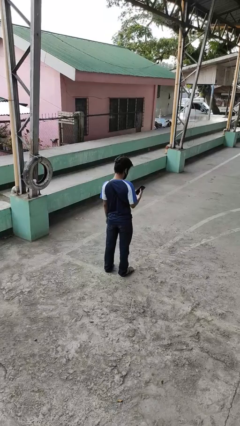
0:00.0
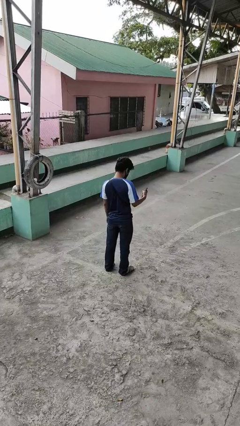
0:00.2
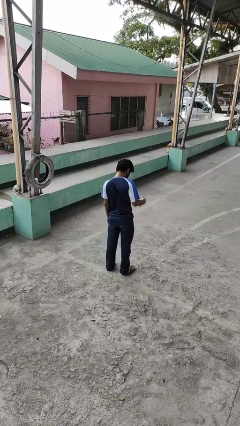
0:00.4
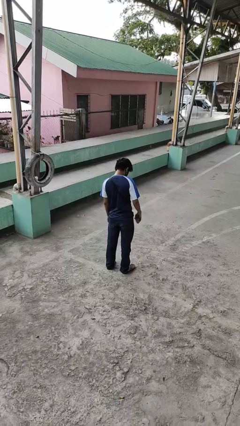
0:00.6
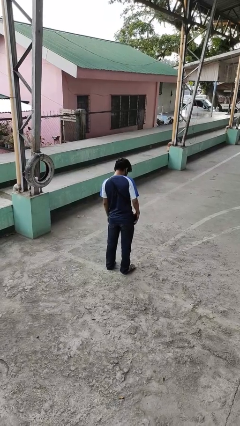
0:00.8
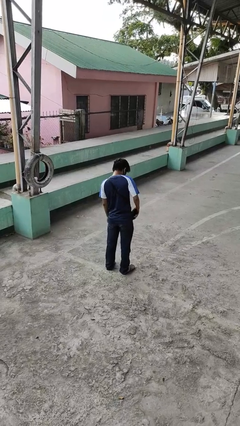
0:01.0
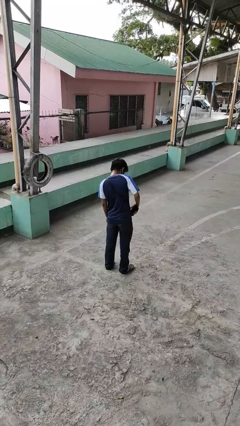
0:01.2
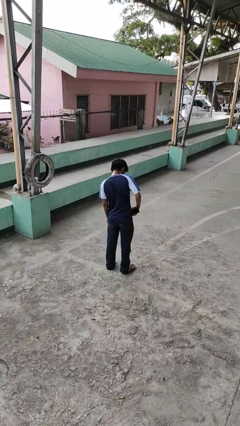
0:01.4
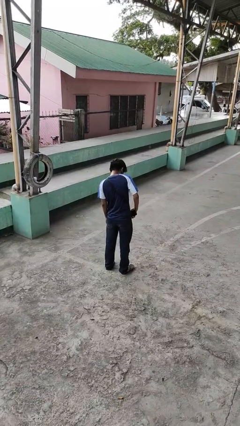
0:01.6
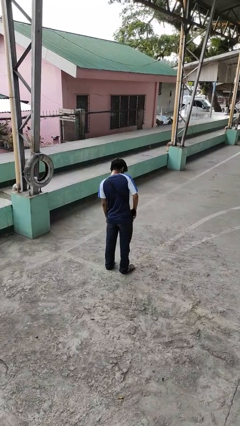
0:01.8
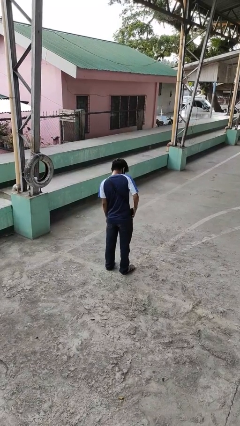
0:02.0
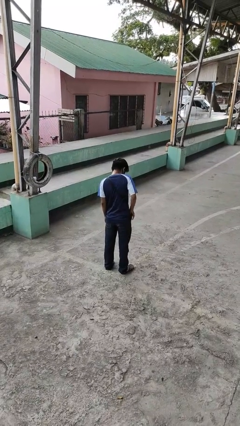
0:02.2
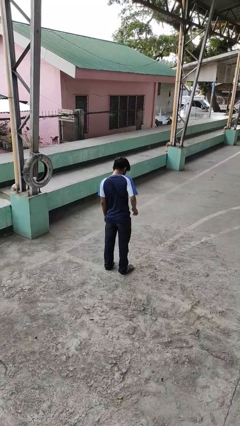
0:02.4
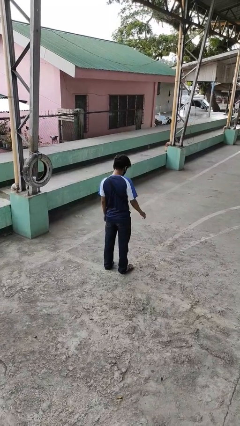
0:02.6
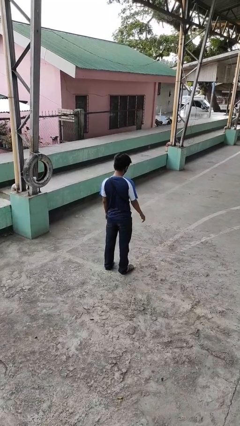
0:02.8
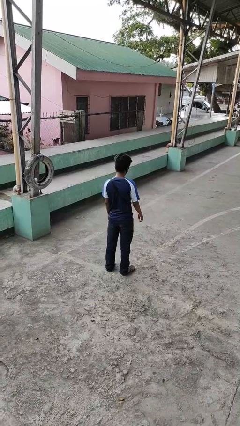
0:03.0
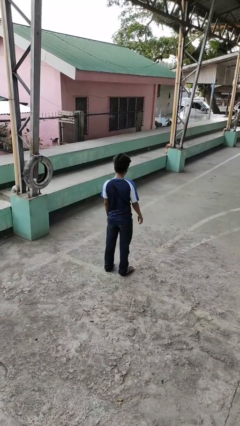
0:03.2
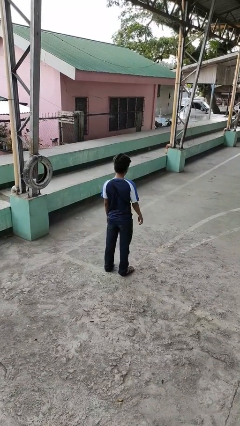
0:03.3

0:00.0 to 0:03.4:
person puts phone into pocket

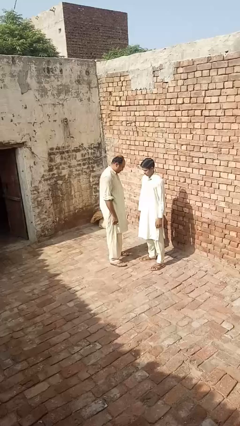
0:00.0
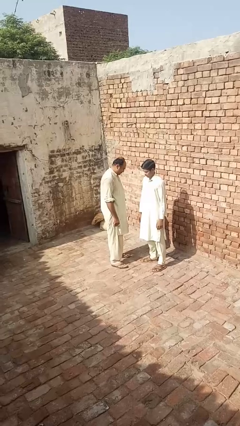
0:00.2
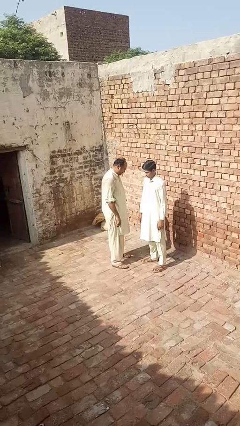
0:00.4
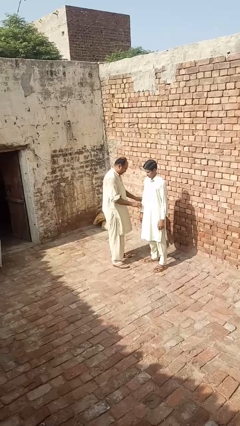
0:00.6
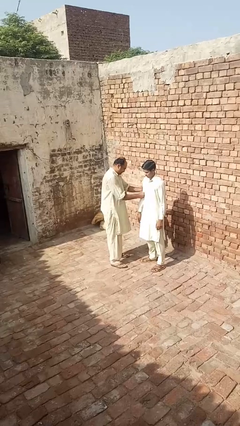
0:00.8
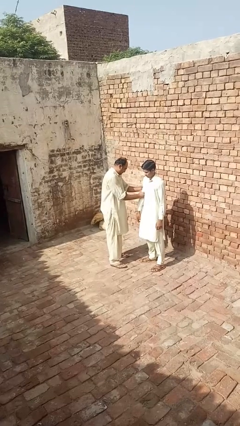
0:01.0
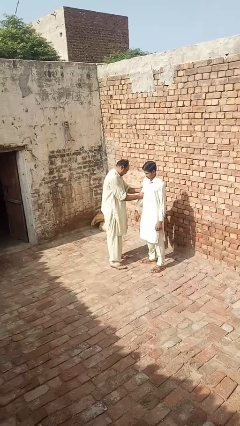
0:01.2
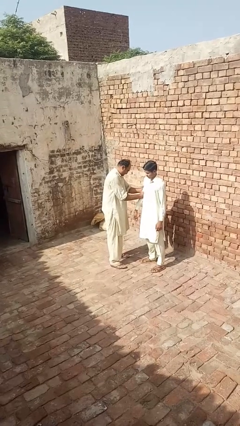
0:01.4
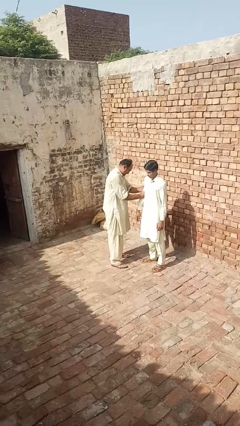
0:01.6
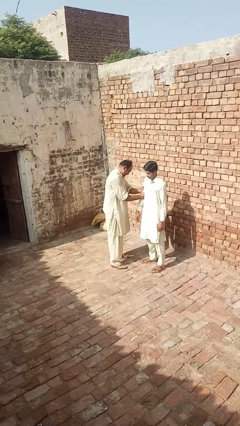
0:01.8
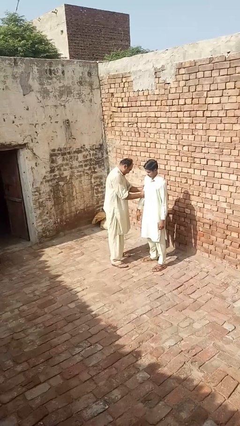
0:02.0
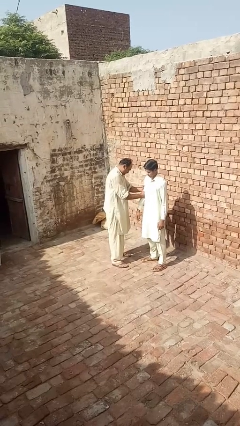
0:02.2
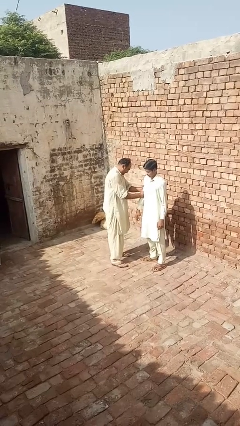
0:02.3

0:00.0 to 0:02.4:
person grabs person by bicep

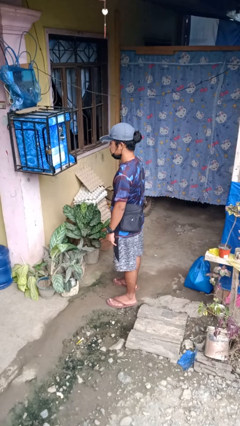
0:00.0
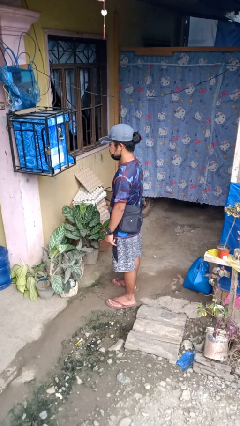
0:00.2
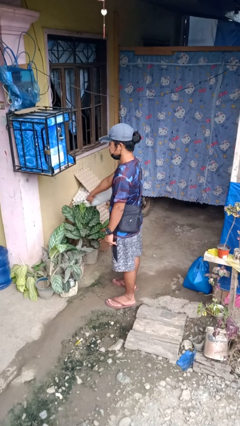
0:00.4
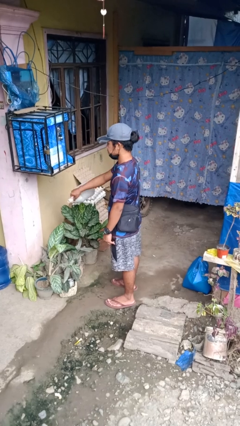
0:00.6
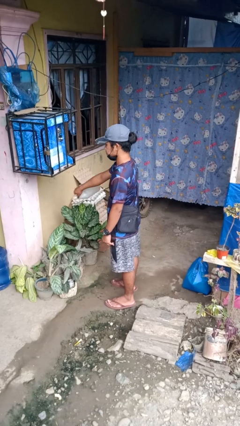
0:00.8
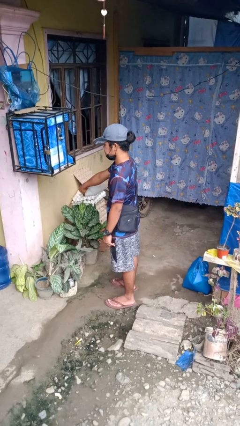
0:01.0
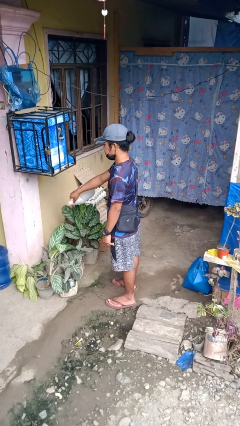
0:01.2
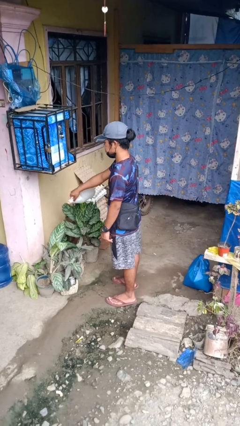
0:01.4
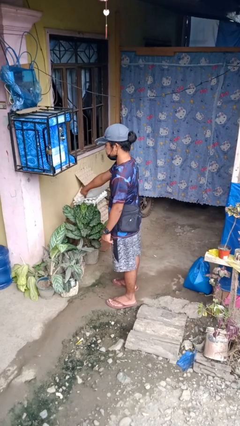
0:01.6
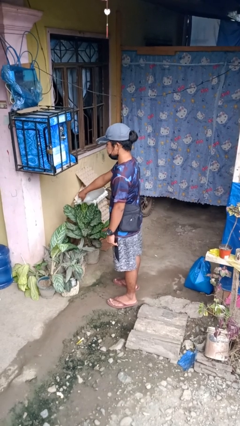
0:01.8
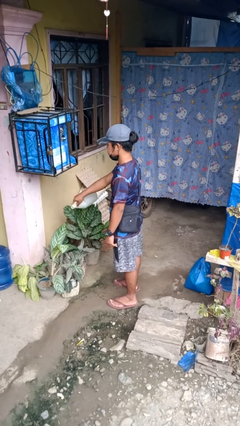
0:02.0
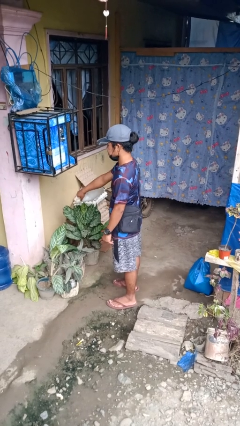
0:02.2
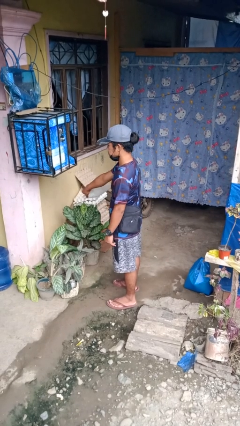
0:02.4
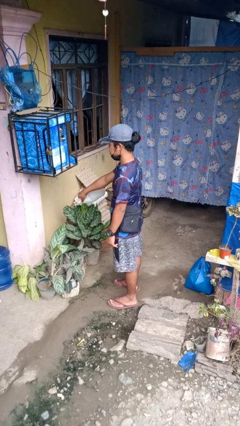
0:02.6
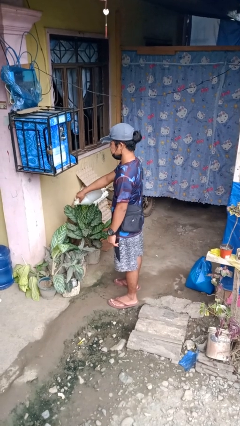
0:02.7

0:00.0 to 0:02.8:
person waters houseplant

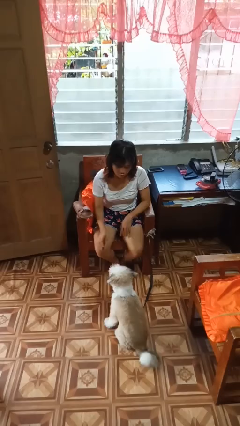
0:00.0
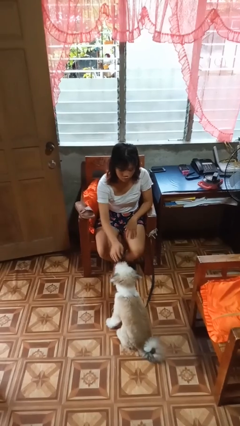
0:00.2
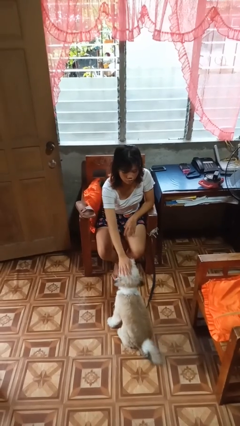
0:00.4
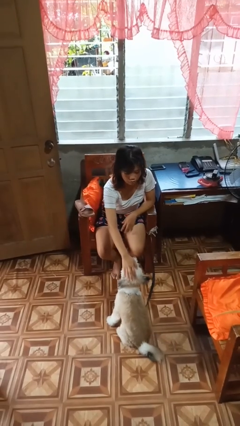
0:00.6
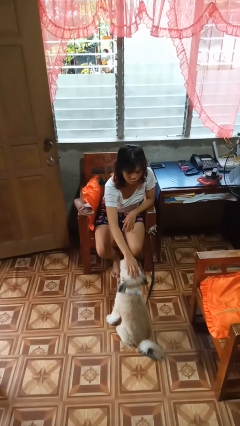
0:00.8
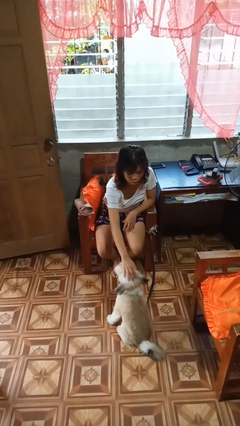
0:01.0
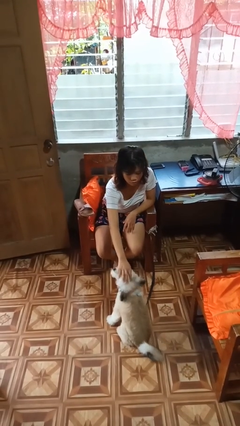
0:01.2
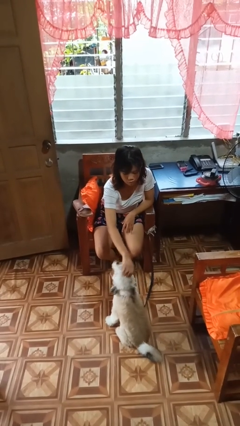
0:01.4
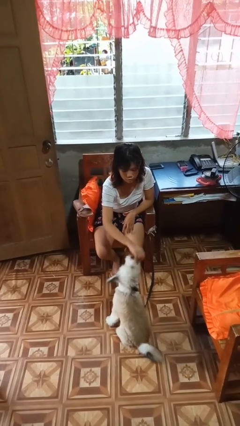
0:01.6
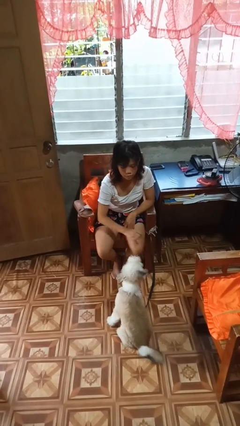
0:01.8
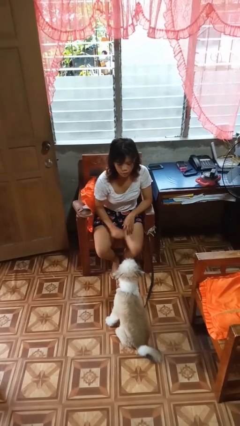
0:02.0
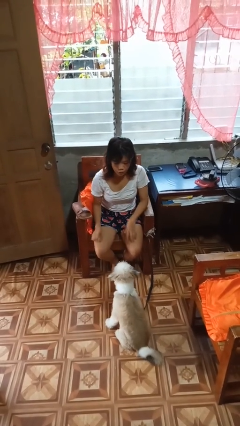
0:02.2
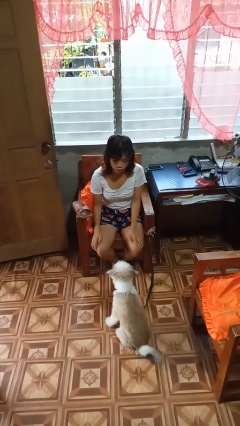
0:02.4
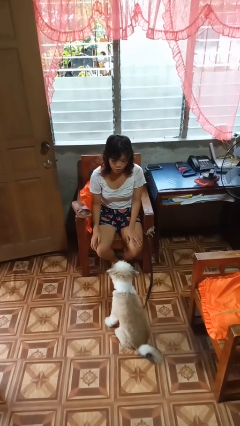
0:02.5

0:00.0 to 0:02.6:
person pets dog

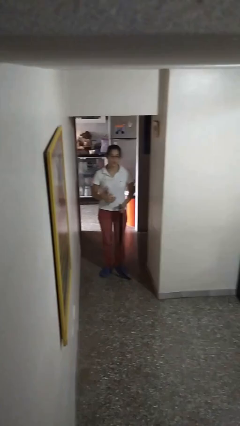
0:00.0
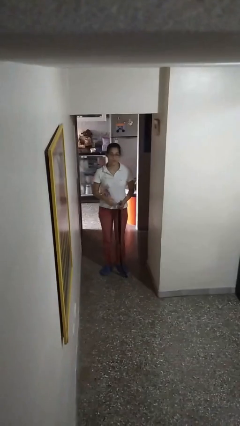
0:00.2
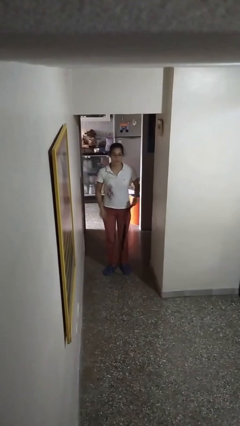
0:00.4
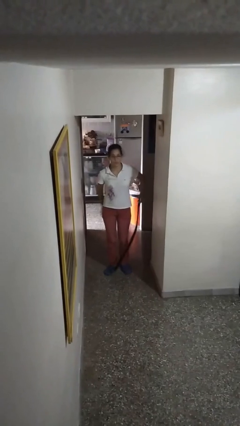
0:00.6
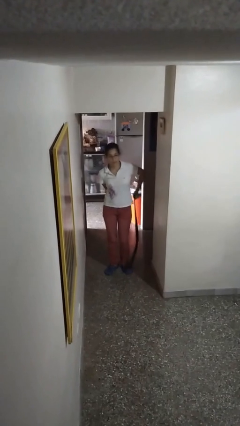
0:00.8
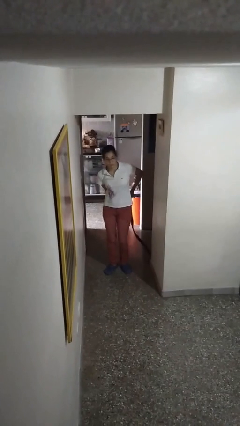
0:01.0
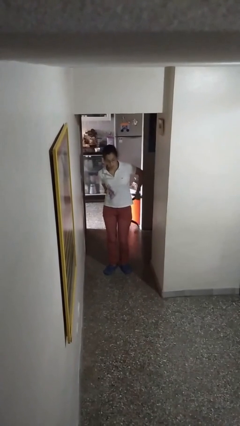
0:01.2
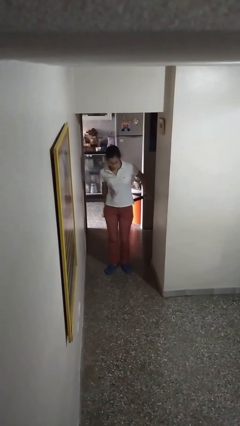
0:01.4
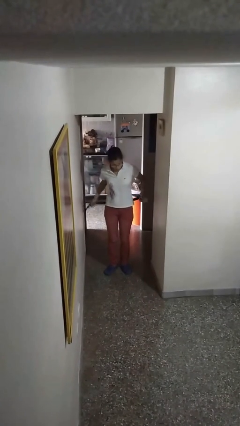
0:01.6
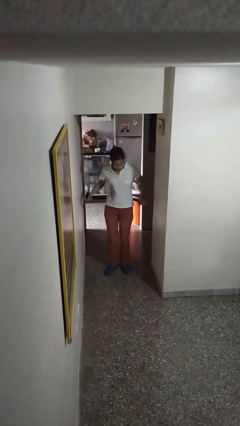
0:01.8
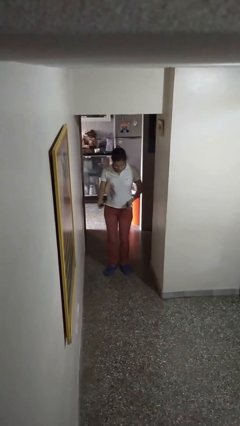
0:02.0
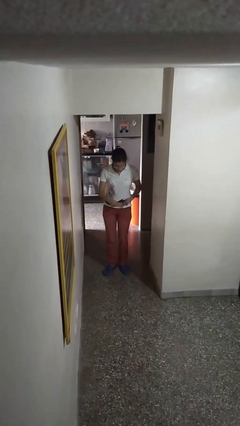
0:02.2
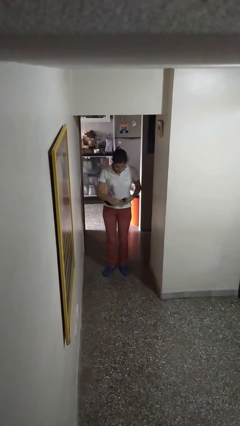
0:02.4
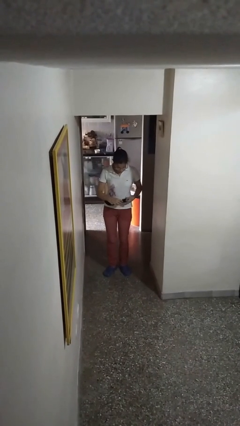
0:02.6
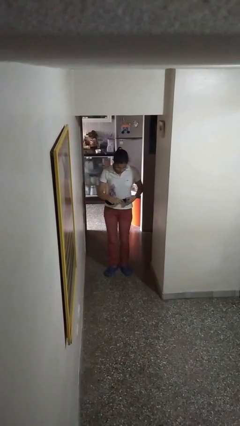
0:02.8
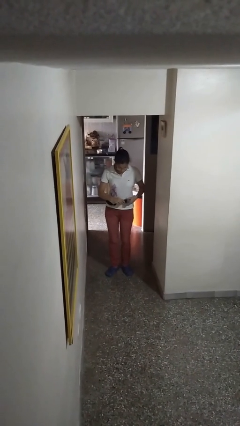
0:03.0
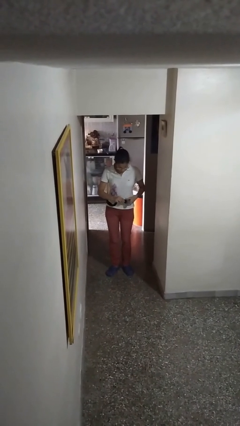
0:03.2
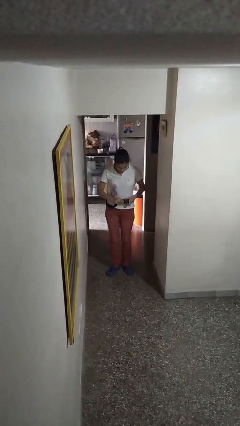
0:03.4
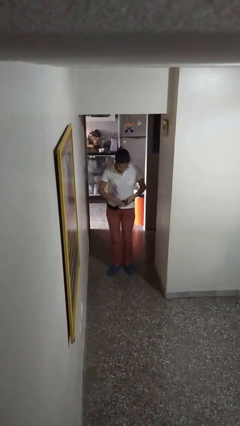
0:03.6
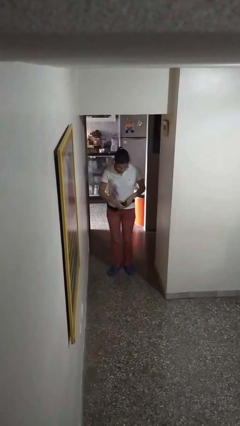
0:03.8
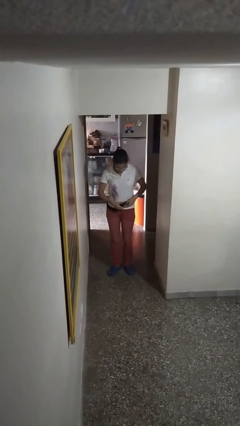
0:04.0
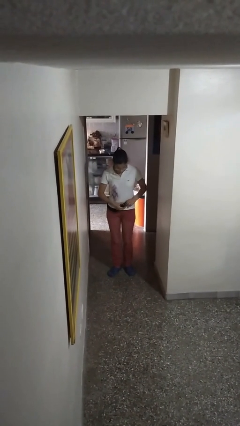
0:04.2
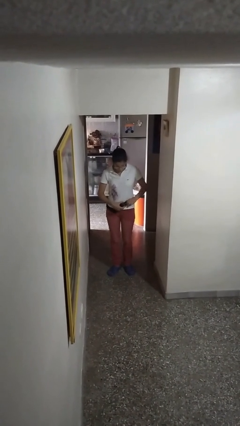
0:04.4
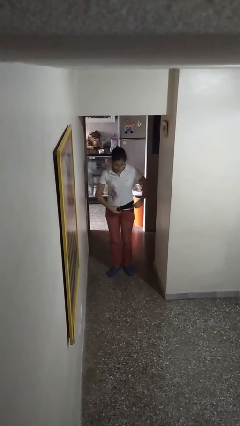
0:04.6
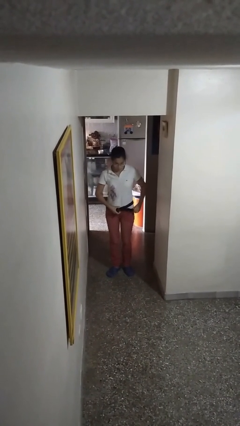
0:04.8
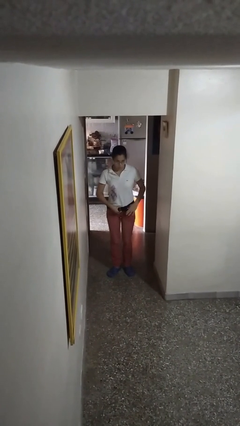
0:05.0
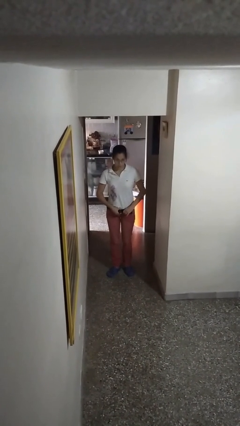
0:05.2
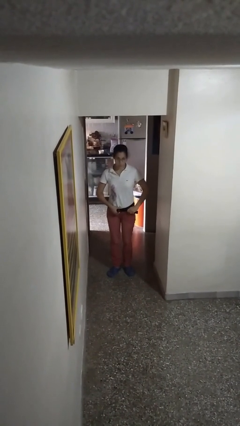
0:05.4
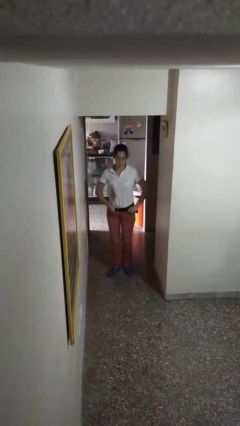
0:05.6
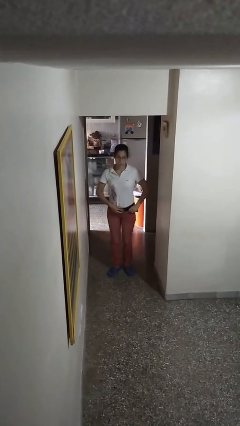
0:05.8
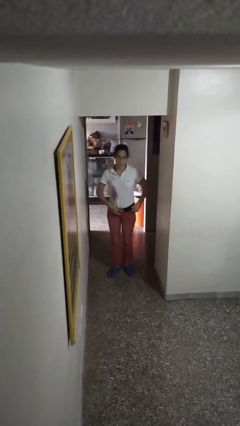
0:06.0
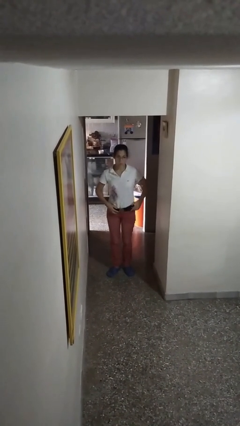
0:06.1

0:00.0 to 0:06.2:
person puts on belt

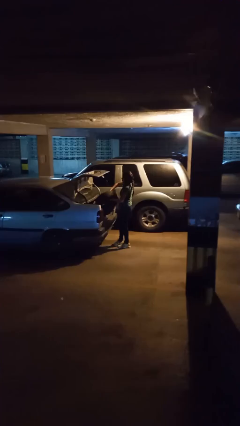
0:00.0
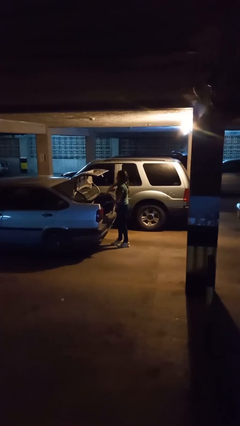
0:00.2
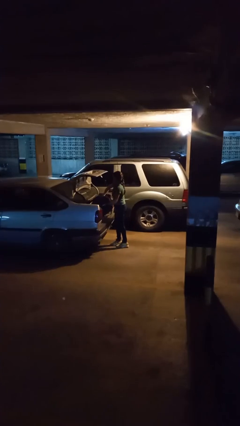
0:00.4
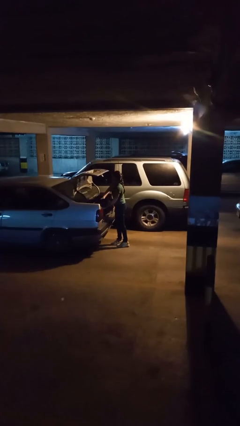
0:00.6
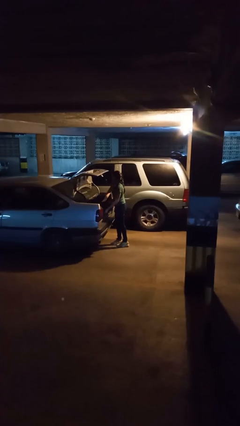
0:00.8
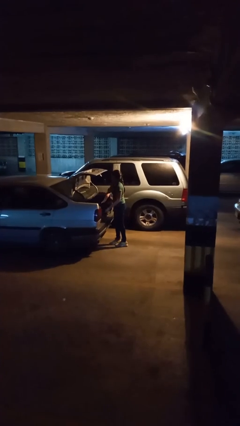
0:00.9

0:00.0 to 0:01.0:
person loads car
